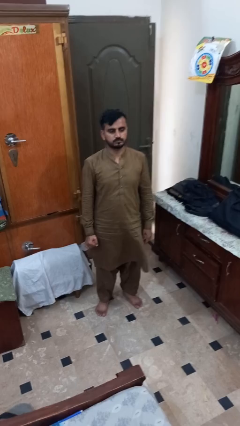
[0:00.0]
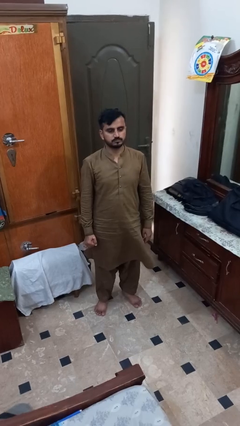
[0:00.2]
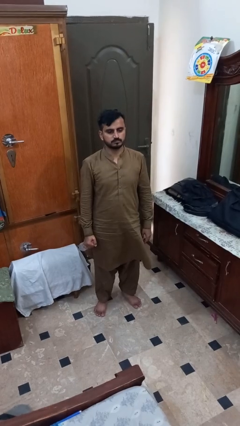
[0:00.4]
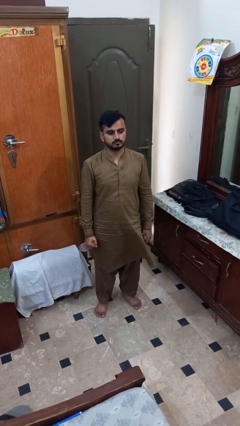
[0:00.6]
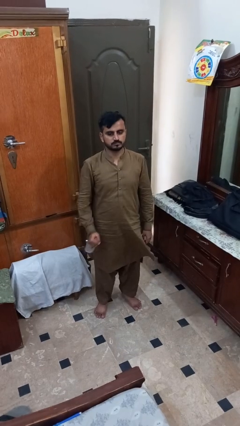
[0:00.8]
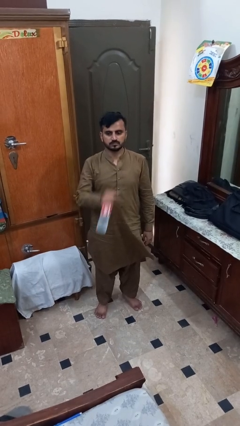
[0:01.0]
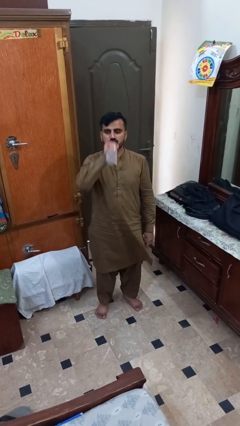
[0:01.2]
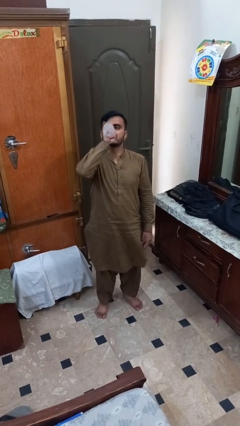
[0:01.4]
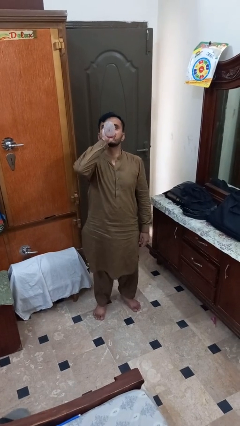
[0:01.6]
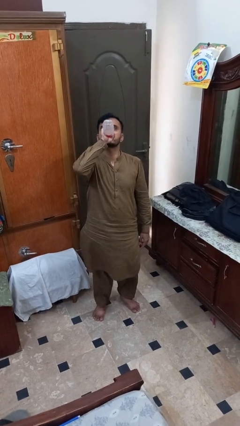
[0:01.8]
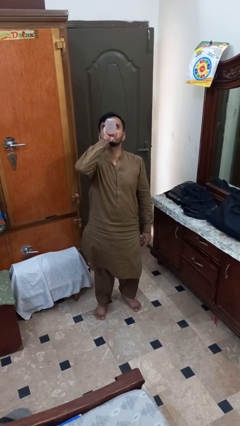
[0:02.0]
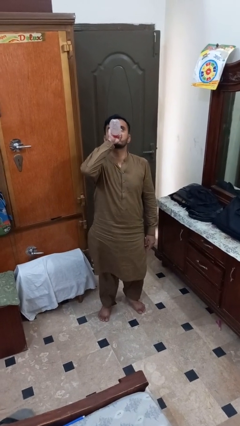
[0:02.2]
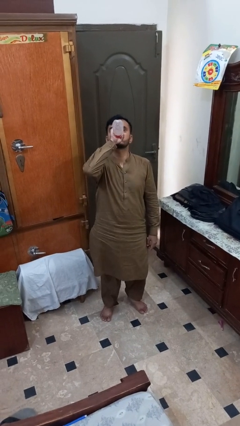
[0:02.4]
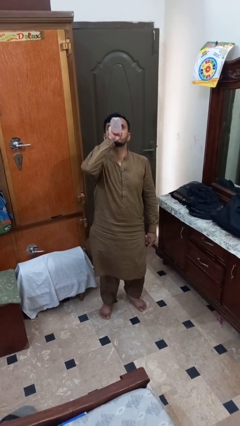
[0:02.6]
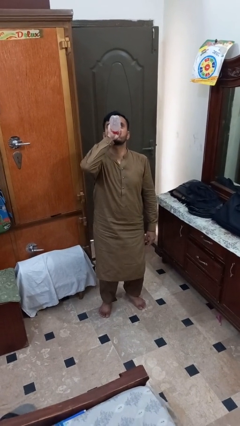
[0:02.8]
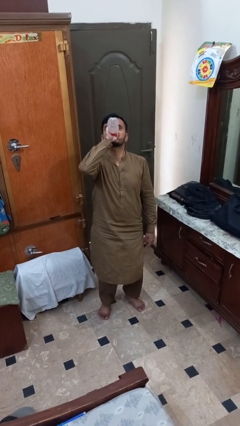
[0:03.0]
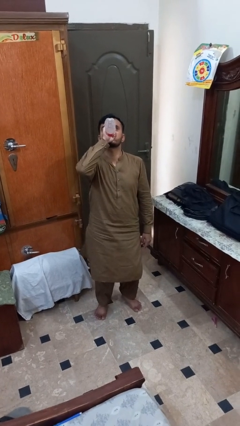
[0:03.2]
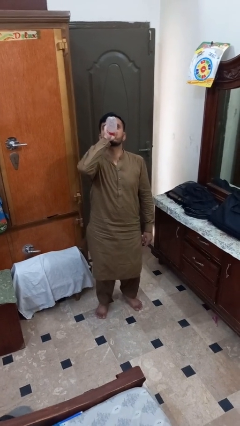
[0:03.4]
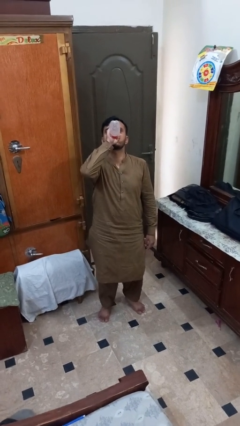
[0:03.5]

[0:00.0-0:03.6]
person drinks from bottle

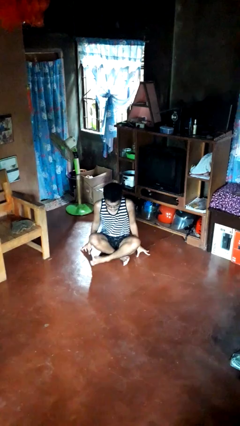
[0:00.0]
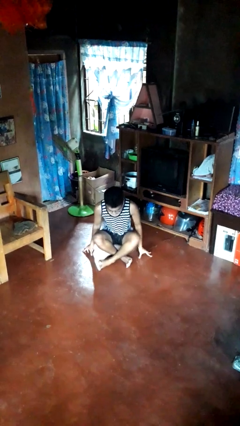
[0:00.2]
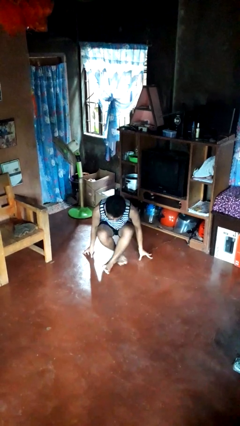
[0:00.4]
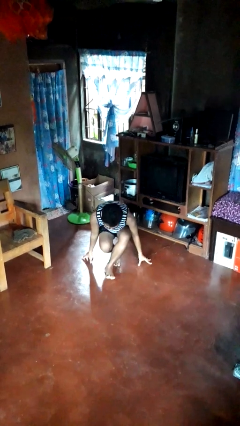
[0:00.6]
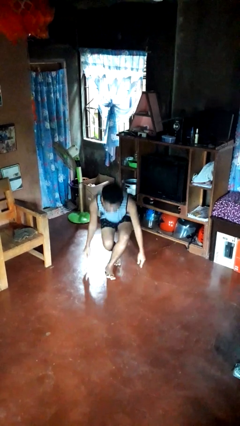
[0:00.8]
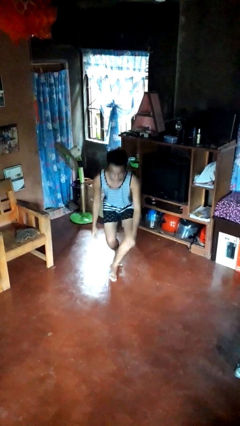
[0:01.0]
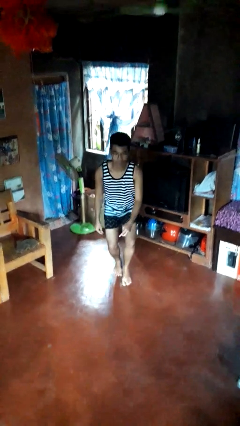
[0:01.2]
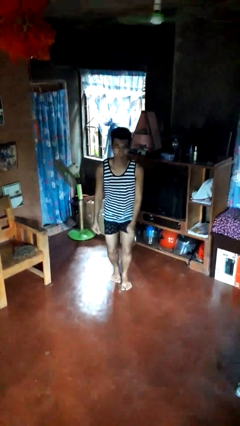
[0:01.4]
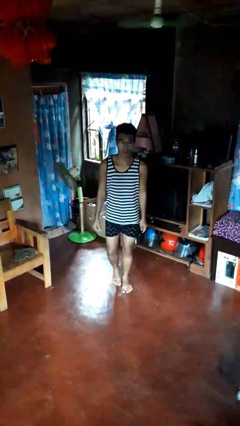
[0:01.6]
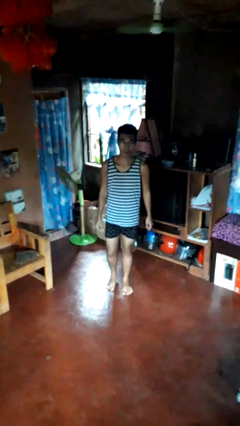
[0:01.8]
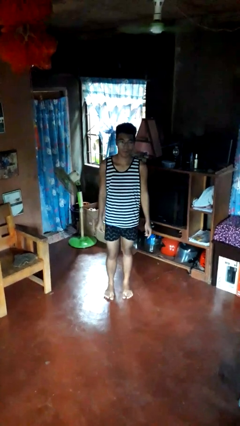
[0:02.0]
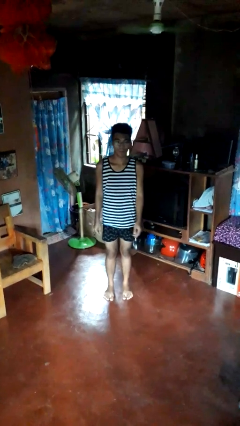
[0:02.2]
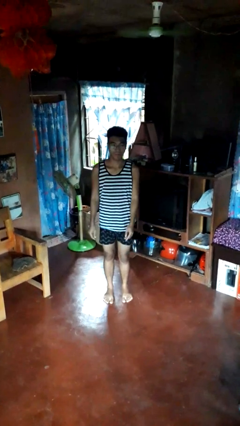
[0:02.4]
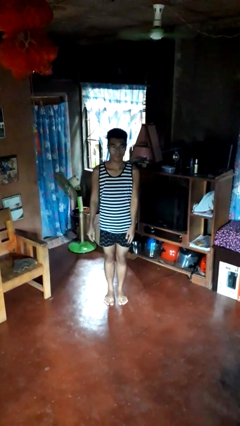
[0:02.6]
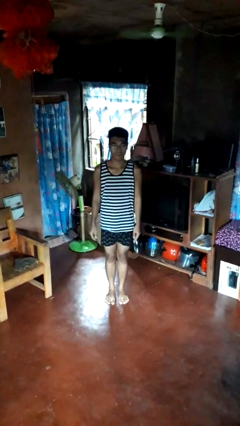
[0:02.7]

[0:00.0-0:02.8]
person stands up from floor

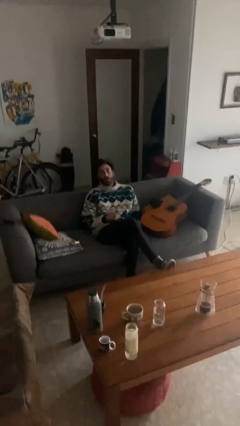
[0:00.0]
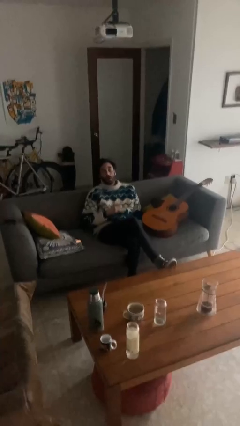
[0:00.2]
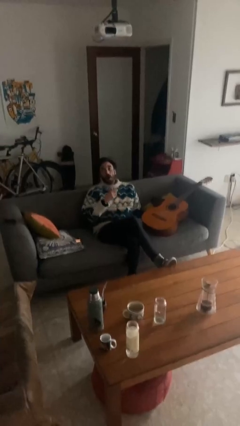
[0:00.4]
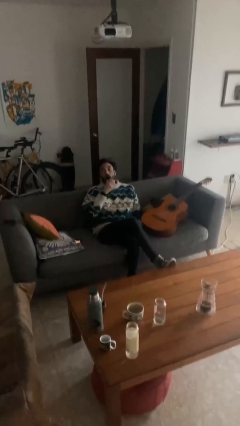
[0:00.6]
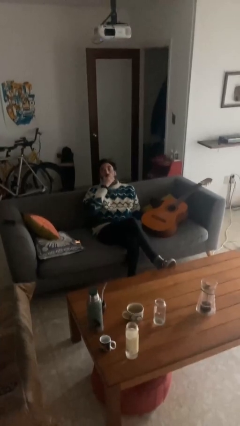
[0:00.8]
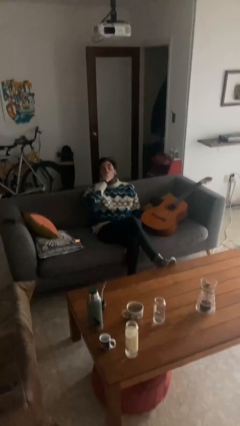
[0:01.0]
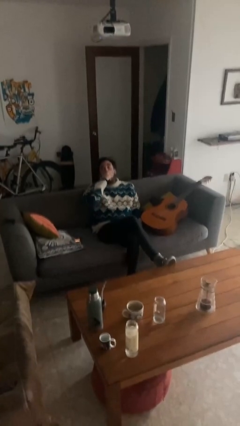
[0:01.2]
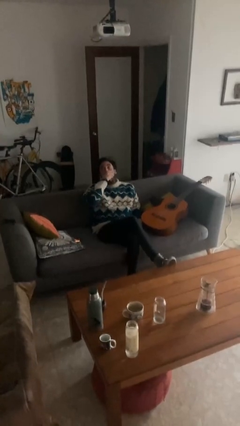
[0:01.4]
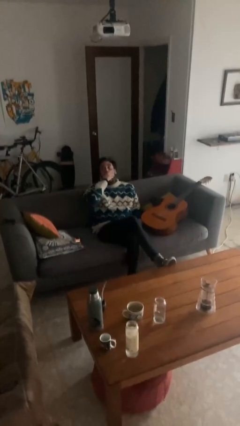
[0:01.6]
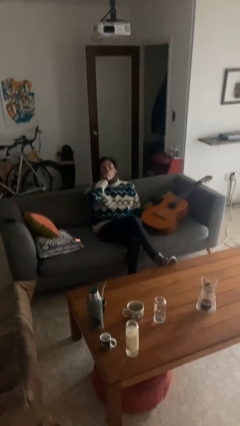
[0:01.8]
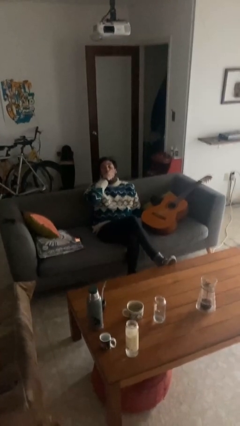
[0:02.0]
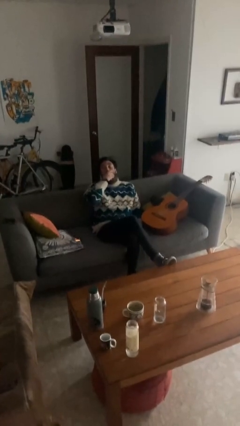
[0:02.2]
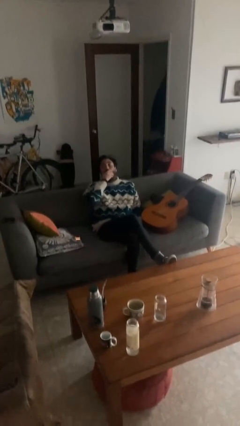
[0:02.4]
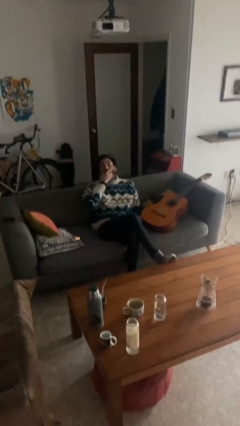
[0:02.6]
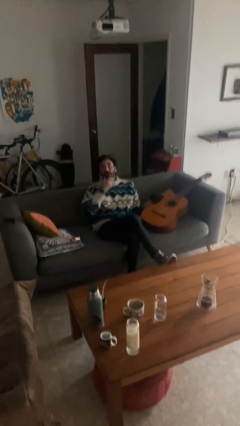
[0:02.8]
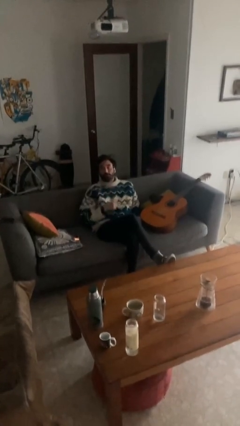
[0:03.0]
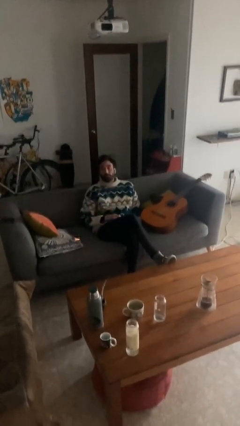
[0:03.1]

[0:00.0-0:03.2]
person yawns

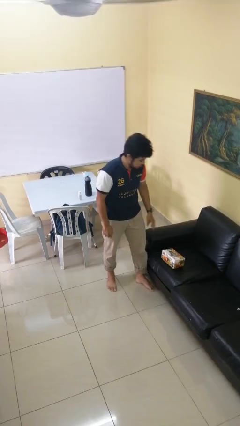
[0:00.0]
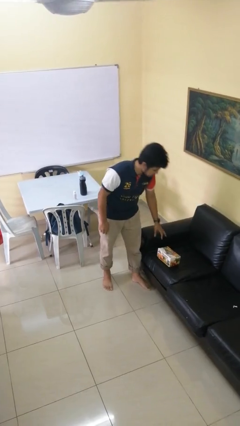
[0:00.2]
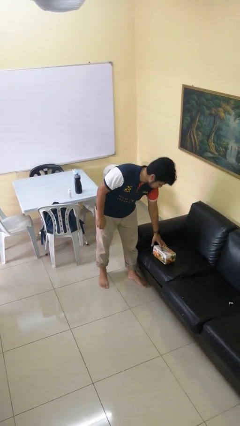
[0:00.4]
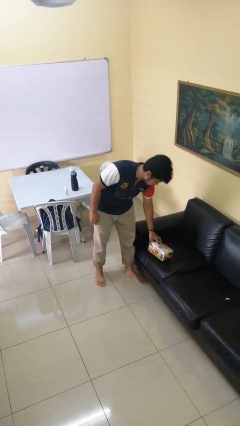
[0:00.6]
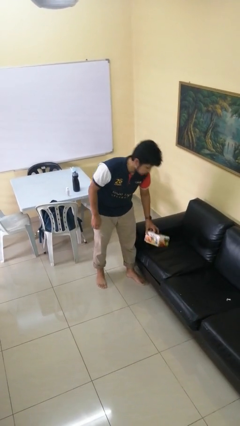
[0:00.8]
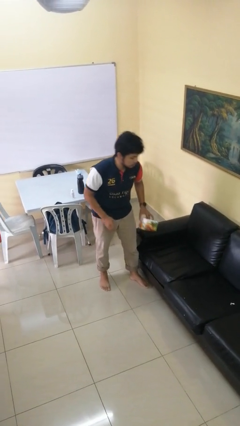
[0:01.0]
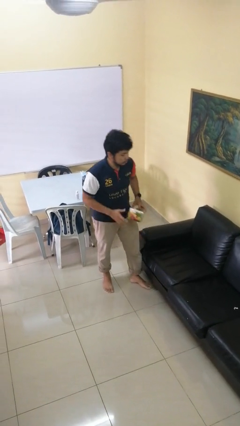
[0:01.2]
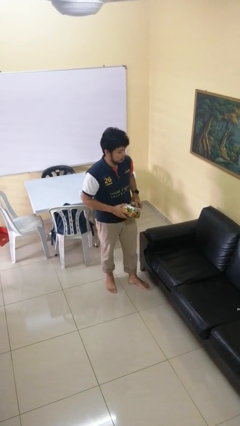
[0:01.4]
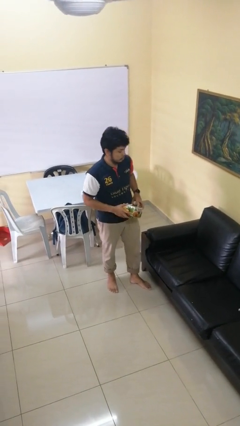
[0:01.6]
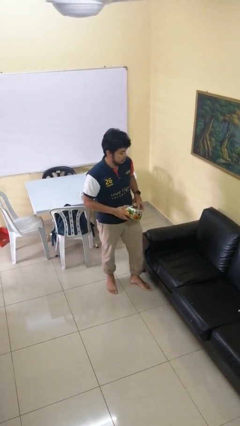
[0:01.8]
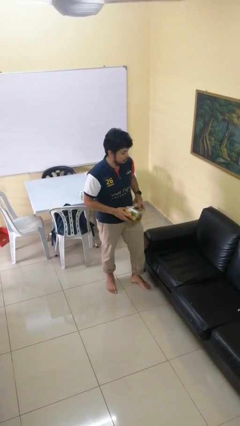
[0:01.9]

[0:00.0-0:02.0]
person picks up object from couch

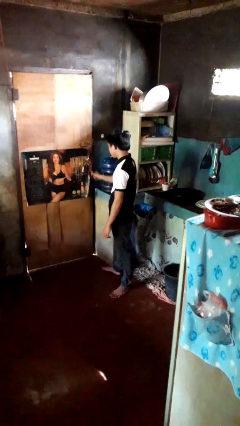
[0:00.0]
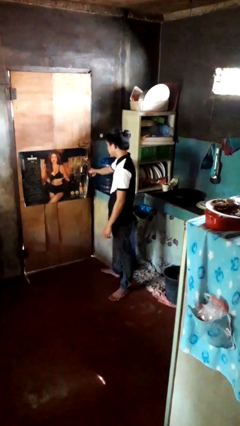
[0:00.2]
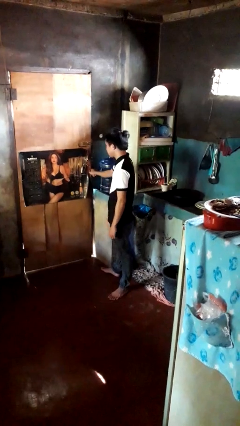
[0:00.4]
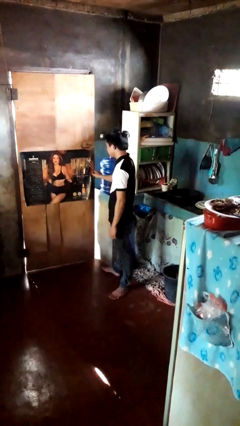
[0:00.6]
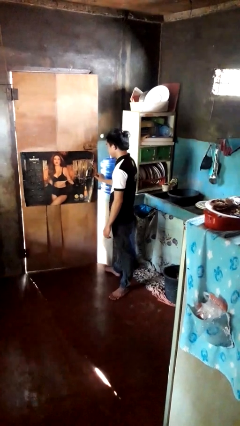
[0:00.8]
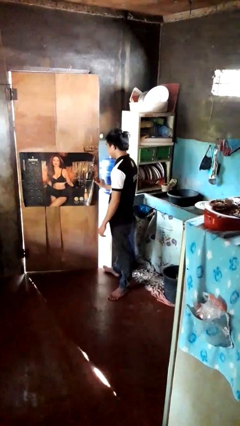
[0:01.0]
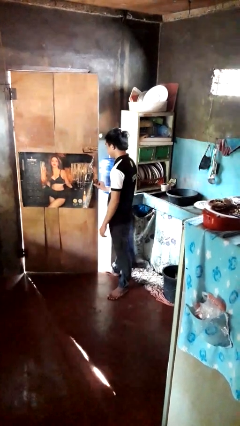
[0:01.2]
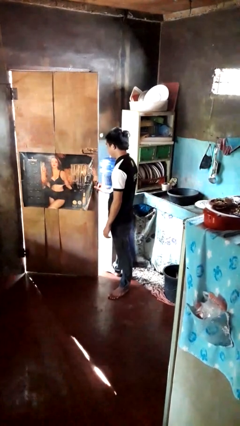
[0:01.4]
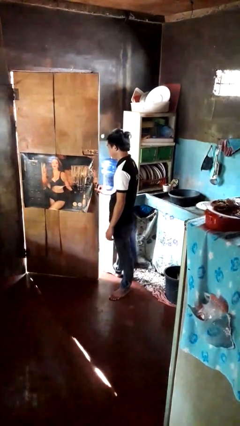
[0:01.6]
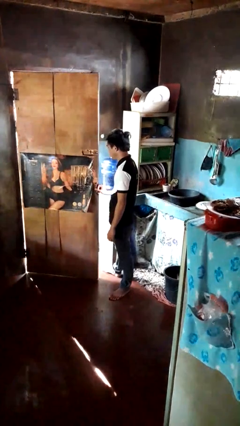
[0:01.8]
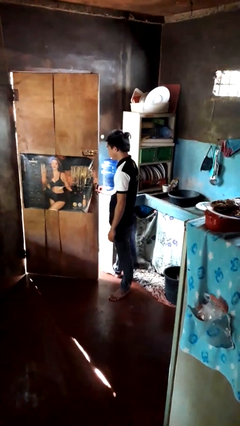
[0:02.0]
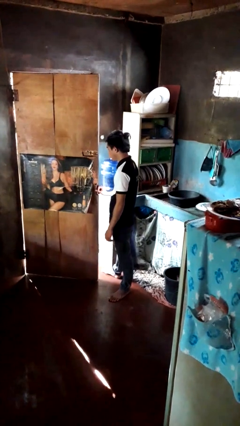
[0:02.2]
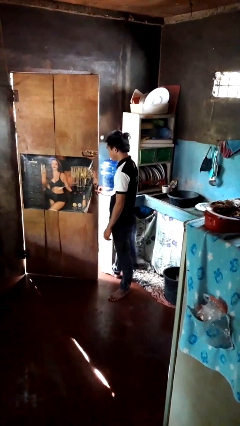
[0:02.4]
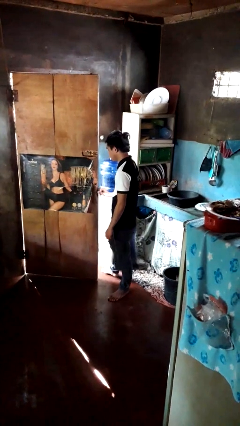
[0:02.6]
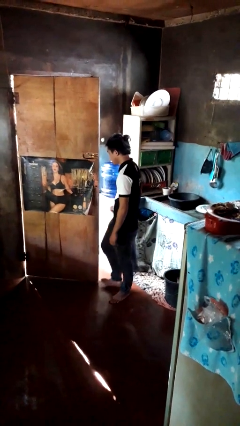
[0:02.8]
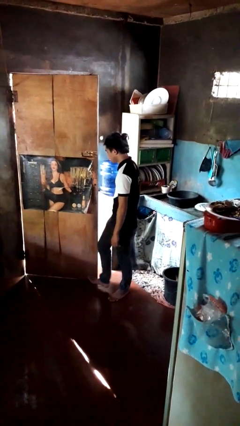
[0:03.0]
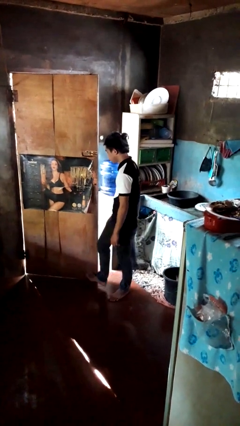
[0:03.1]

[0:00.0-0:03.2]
person opens facility door

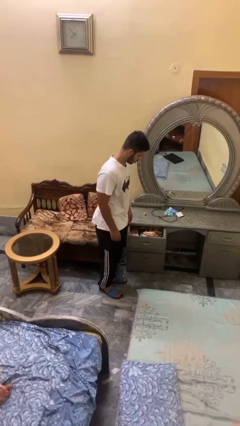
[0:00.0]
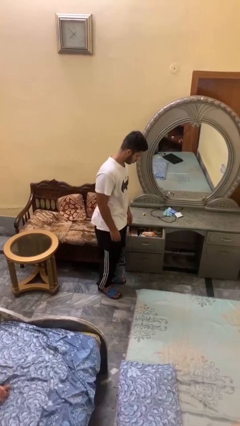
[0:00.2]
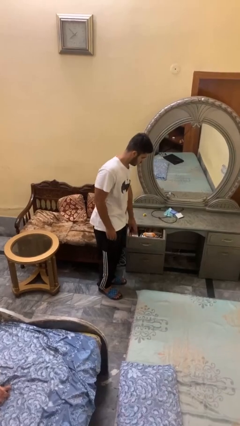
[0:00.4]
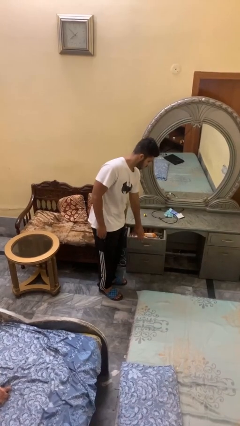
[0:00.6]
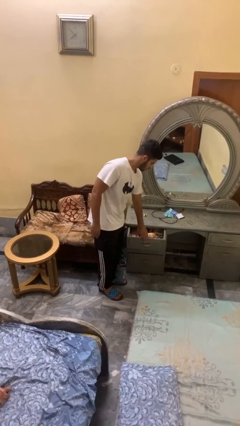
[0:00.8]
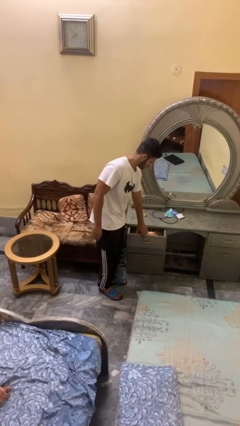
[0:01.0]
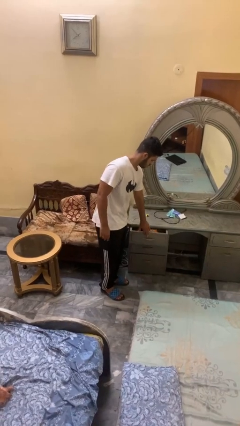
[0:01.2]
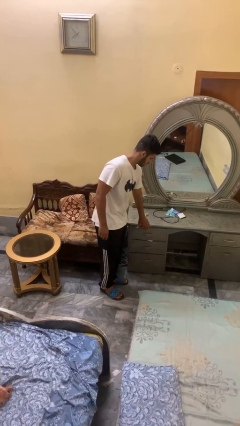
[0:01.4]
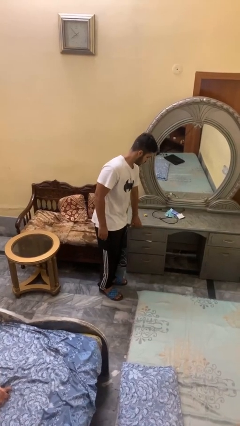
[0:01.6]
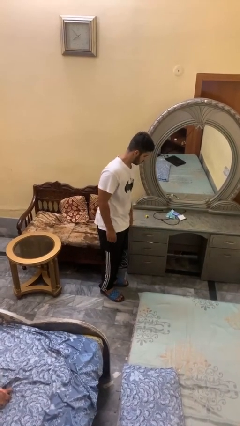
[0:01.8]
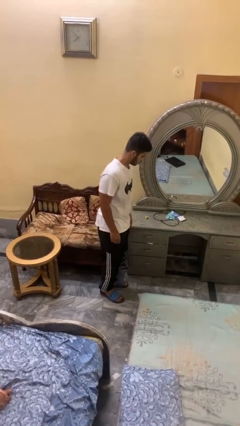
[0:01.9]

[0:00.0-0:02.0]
person closes dresser drawer

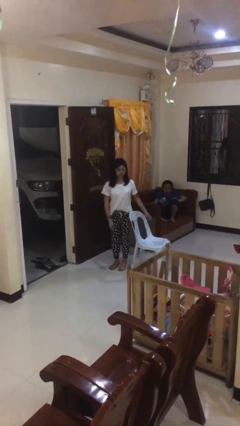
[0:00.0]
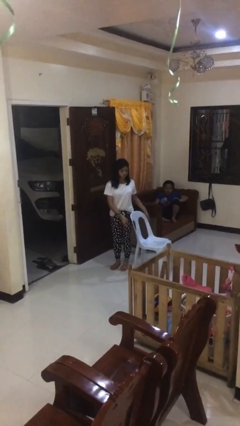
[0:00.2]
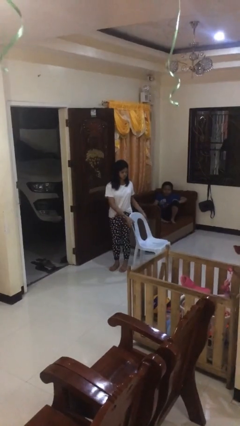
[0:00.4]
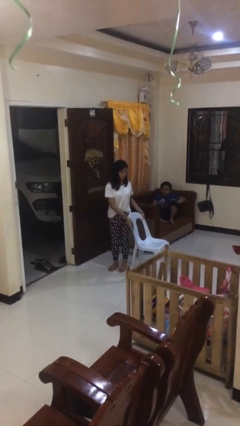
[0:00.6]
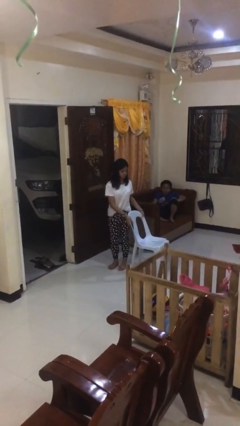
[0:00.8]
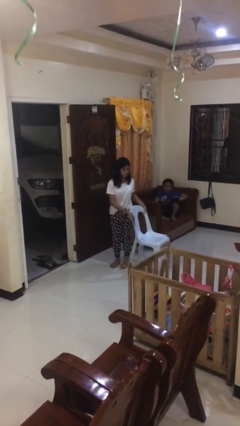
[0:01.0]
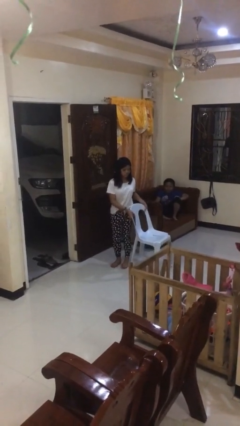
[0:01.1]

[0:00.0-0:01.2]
person picks up object from floor
